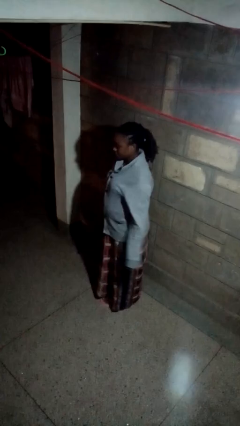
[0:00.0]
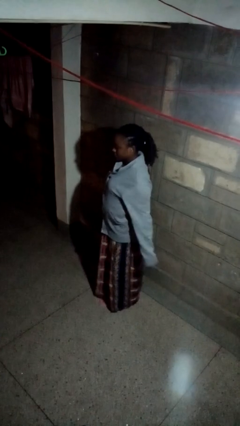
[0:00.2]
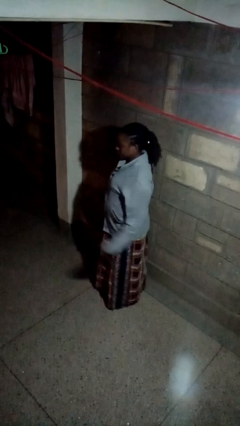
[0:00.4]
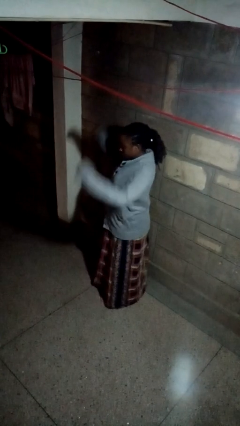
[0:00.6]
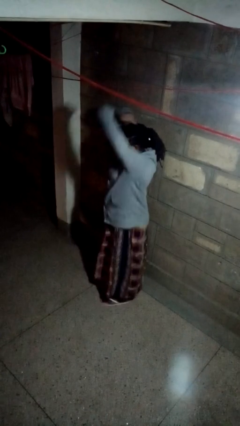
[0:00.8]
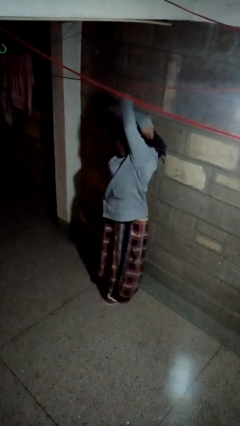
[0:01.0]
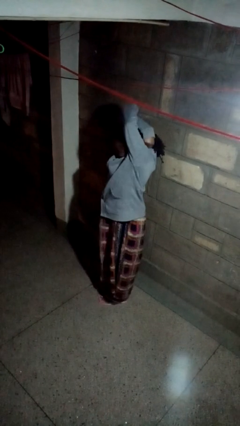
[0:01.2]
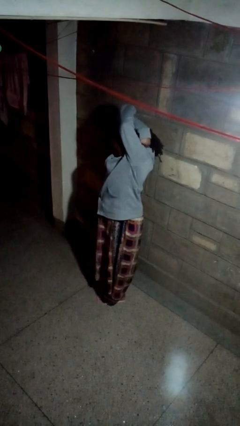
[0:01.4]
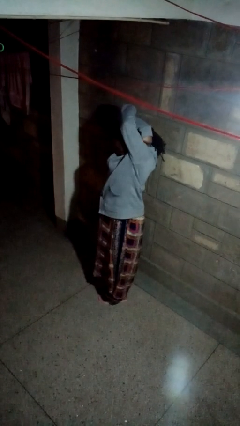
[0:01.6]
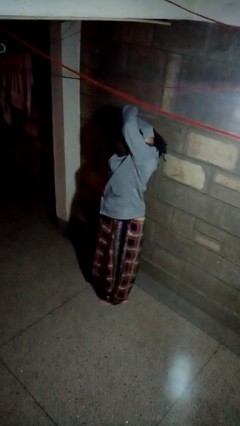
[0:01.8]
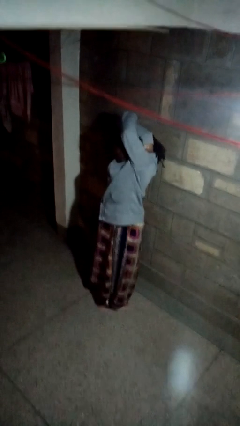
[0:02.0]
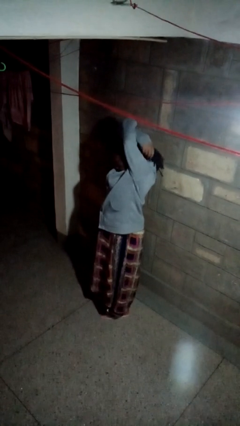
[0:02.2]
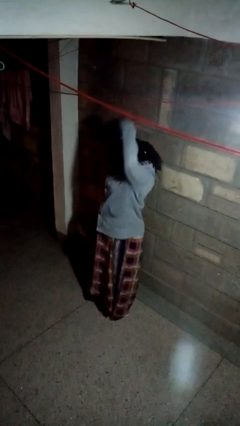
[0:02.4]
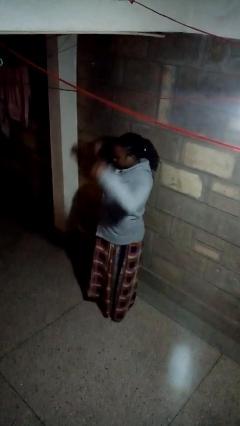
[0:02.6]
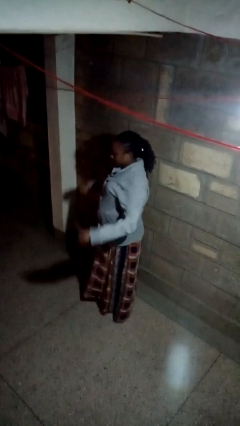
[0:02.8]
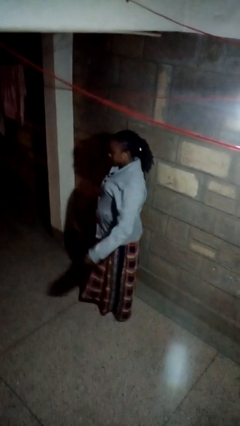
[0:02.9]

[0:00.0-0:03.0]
person stretches arms over head

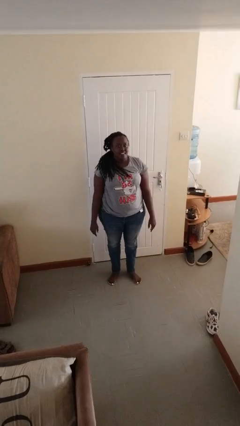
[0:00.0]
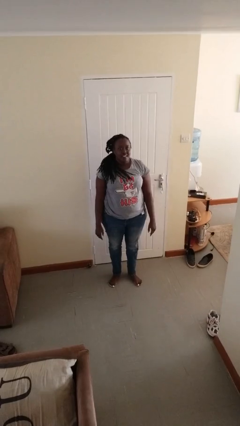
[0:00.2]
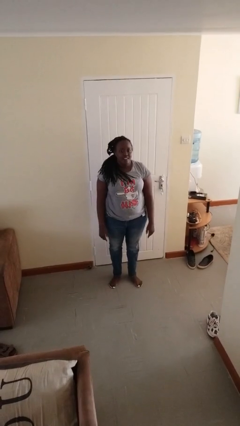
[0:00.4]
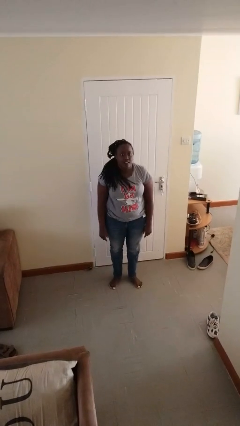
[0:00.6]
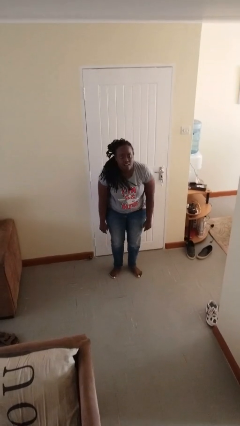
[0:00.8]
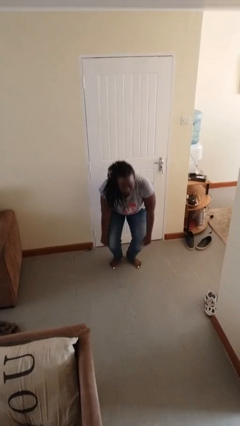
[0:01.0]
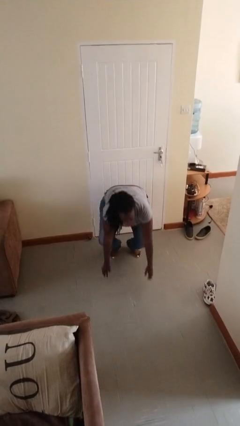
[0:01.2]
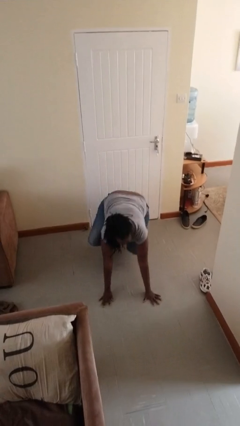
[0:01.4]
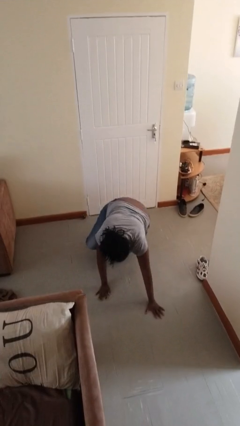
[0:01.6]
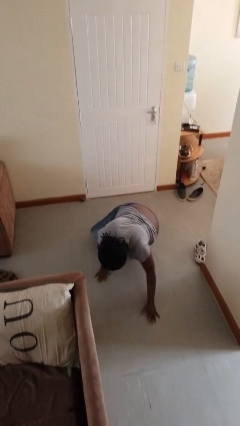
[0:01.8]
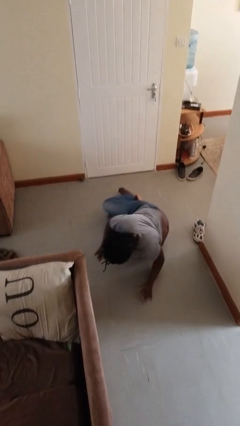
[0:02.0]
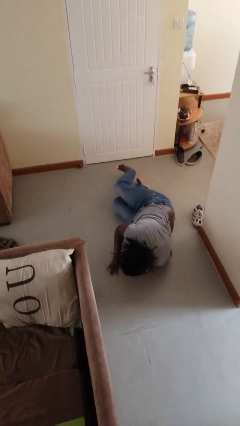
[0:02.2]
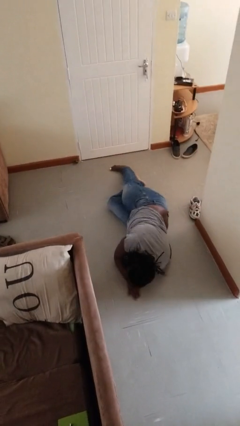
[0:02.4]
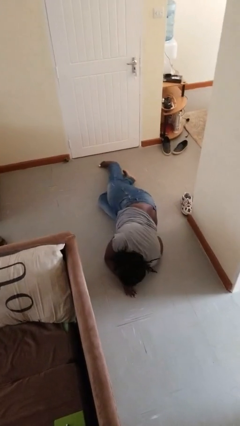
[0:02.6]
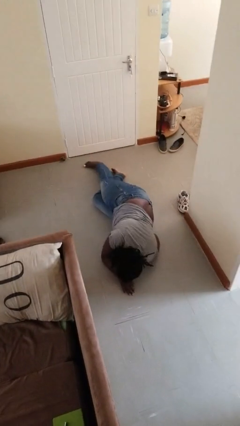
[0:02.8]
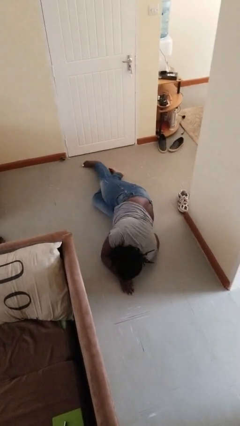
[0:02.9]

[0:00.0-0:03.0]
person falls while standing

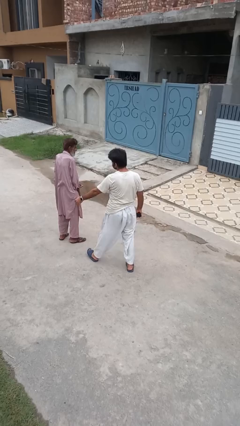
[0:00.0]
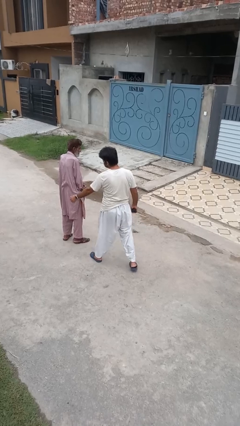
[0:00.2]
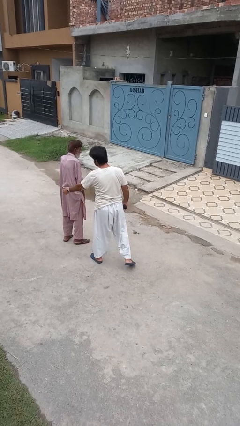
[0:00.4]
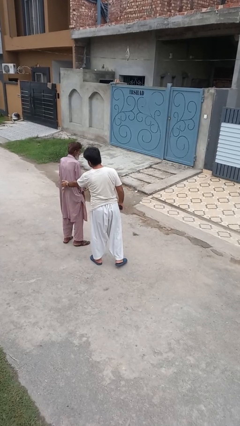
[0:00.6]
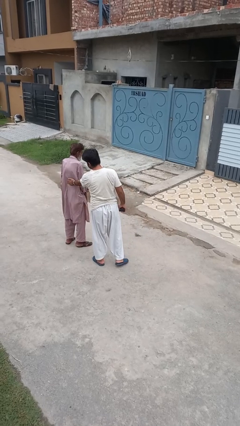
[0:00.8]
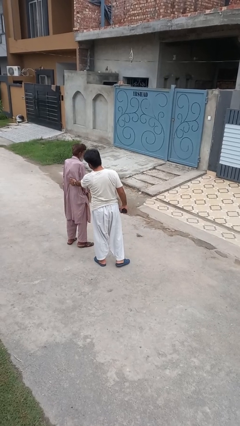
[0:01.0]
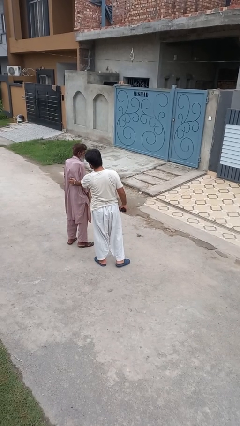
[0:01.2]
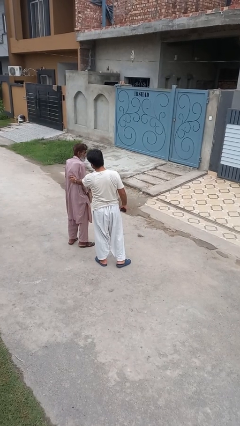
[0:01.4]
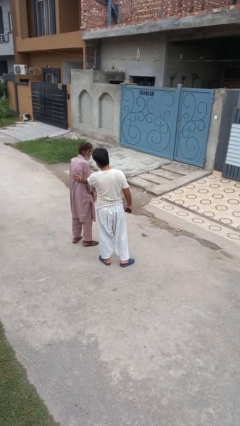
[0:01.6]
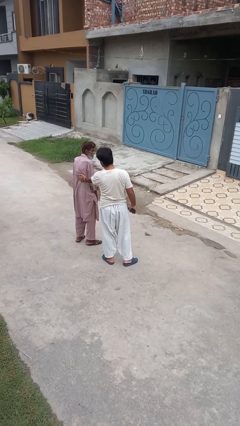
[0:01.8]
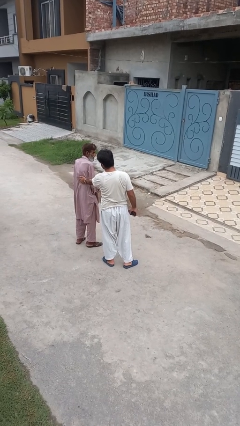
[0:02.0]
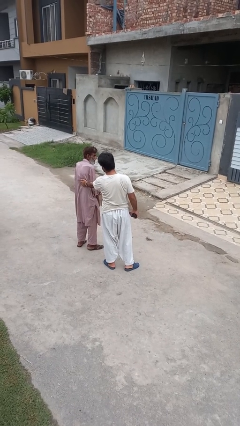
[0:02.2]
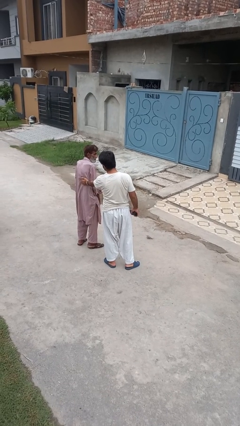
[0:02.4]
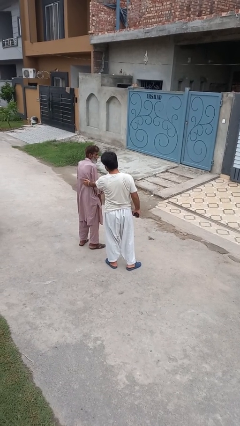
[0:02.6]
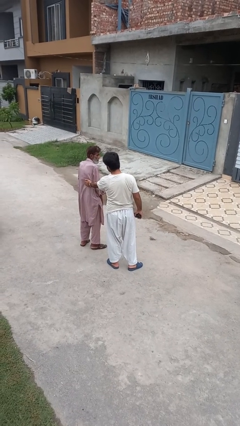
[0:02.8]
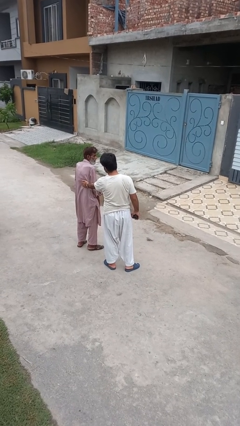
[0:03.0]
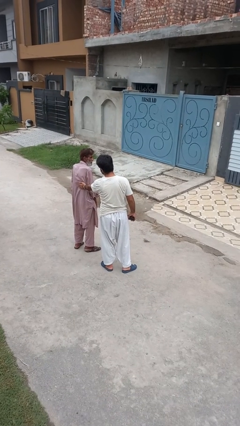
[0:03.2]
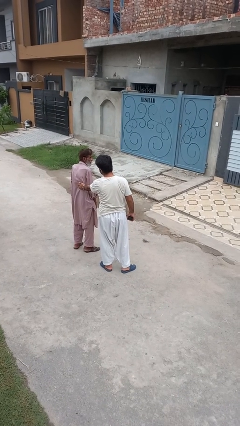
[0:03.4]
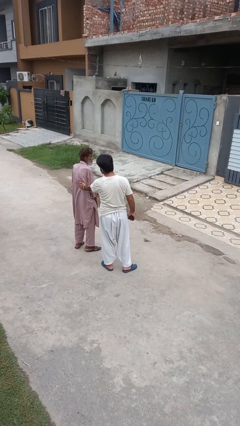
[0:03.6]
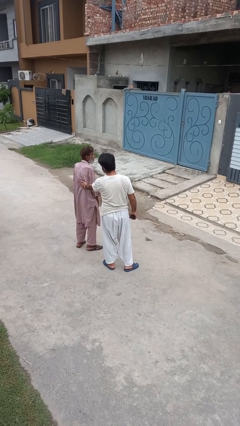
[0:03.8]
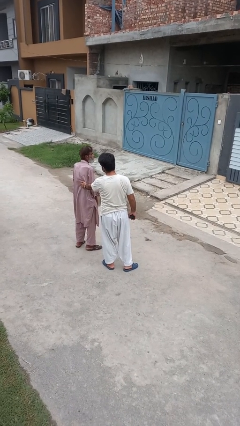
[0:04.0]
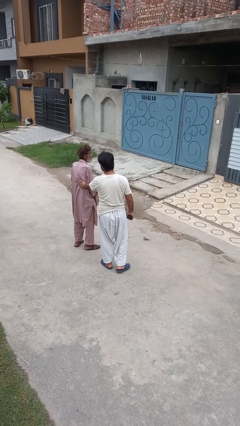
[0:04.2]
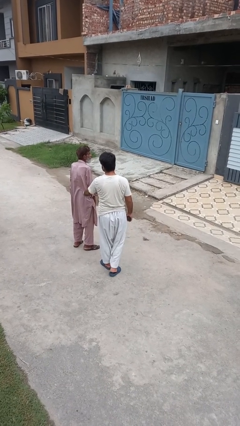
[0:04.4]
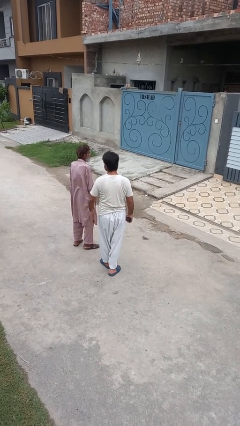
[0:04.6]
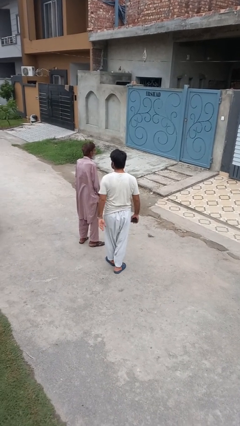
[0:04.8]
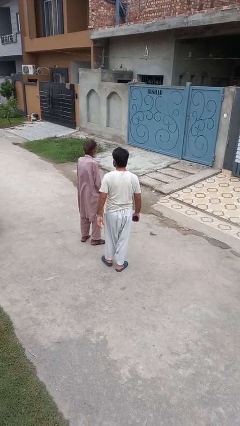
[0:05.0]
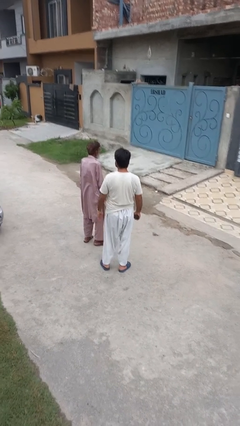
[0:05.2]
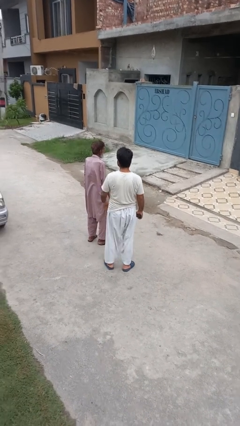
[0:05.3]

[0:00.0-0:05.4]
person touches back of person

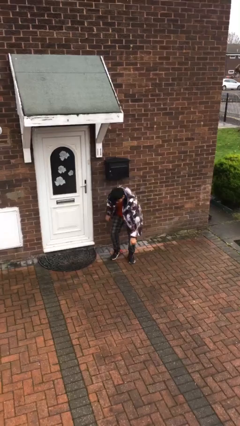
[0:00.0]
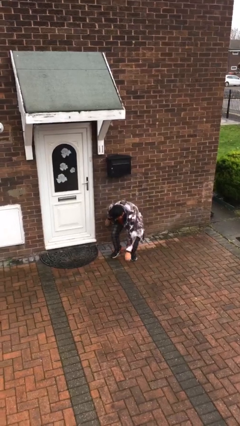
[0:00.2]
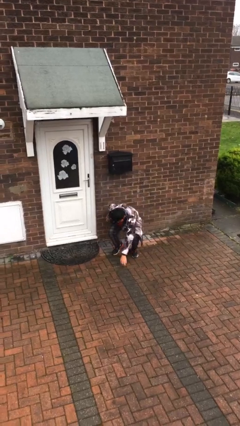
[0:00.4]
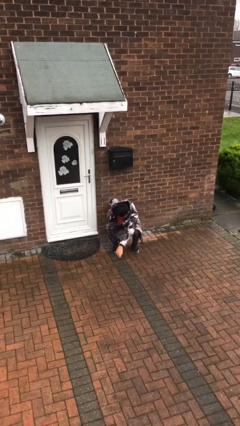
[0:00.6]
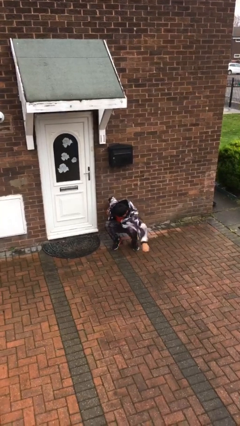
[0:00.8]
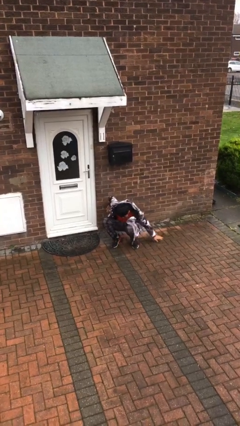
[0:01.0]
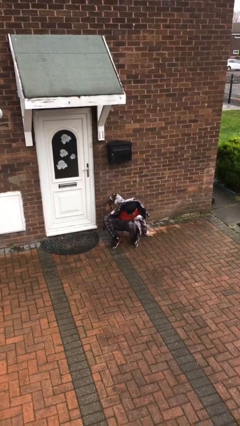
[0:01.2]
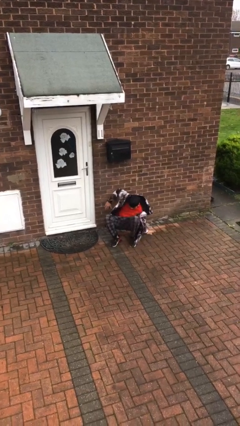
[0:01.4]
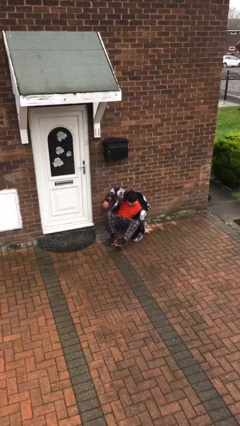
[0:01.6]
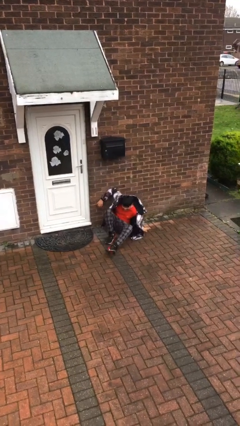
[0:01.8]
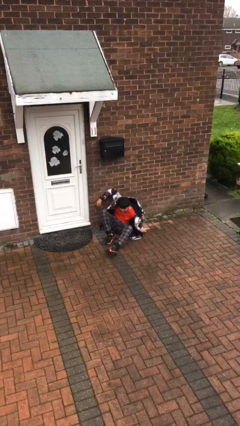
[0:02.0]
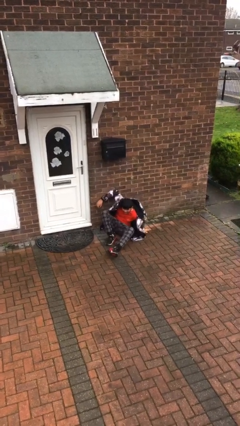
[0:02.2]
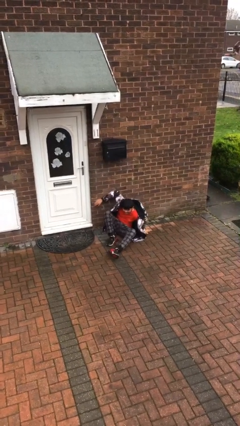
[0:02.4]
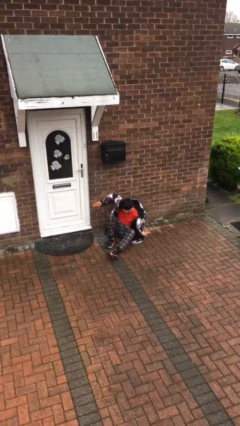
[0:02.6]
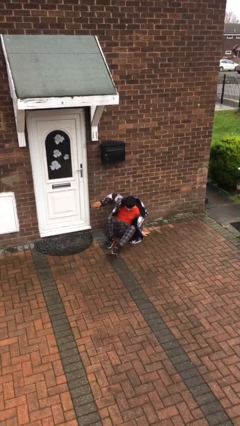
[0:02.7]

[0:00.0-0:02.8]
person sits down

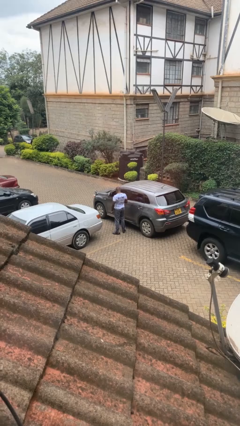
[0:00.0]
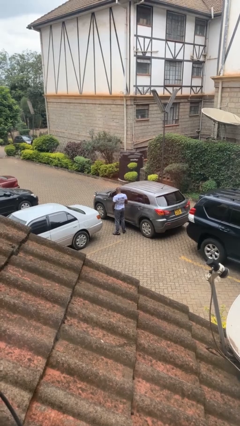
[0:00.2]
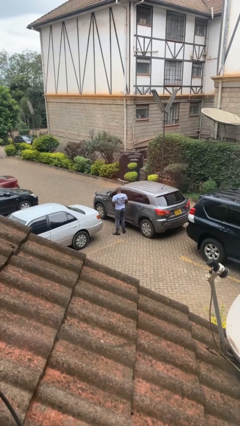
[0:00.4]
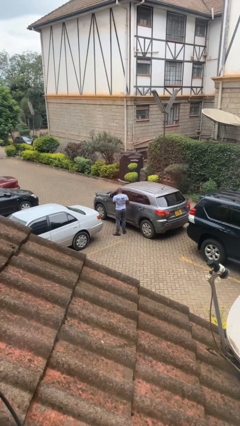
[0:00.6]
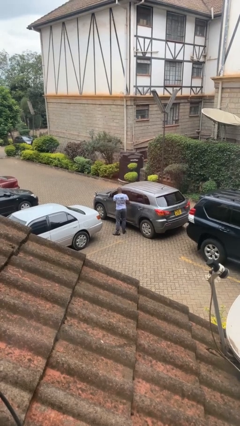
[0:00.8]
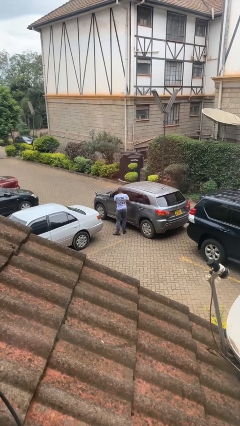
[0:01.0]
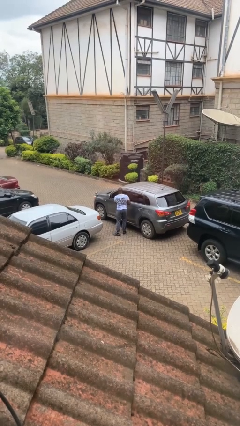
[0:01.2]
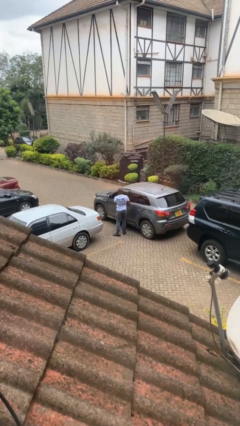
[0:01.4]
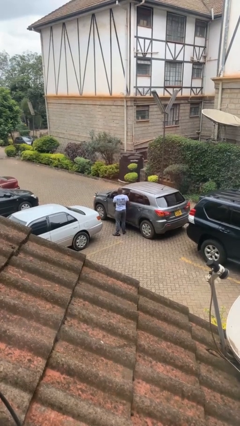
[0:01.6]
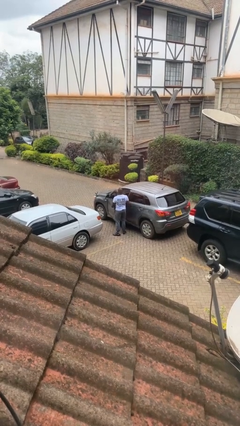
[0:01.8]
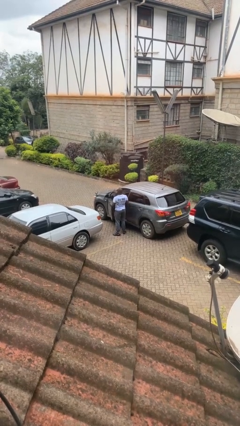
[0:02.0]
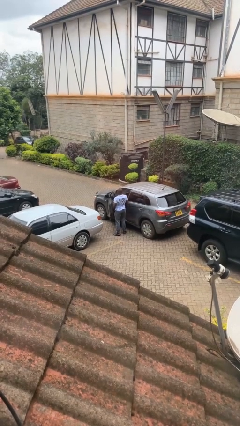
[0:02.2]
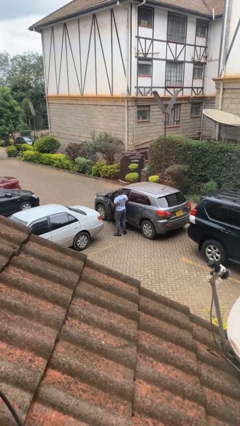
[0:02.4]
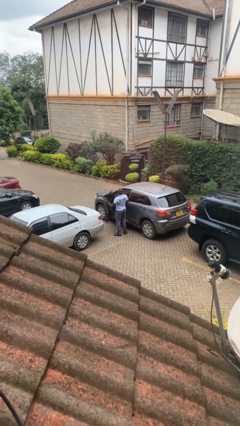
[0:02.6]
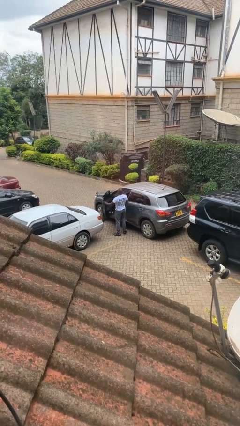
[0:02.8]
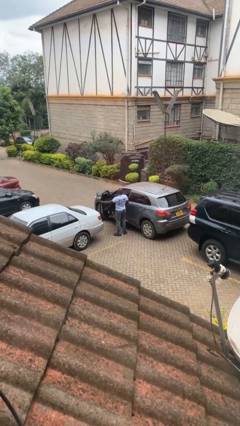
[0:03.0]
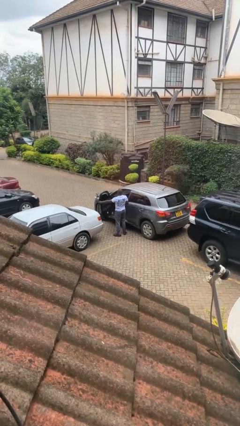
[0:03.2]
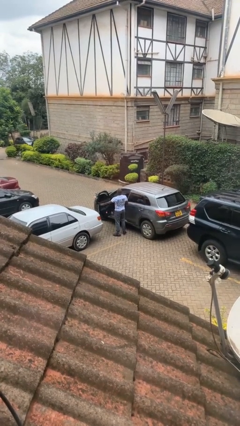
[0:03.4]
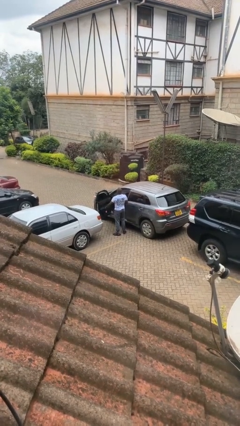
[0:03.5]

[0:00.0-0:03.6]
person opens car door
